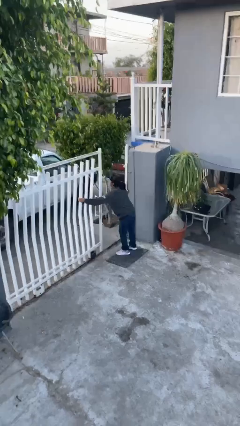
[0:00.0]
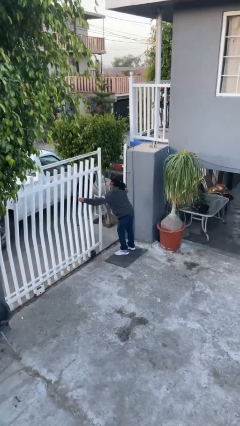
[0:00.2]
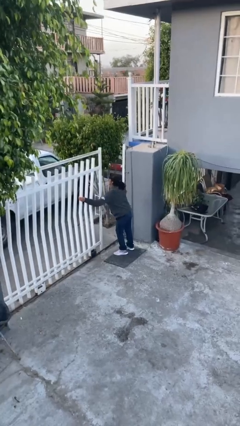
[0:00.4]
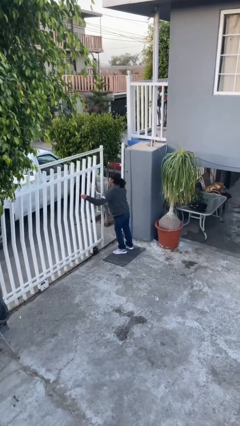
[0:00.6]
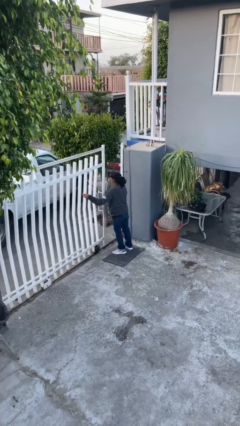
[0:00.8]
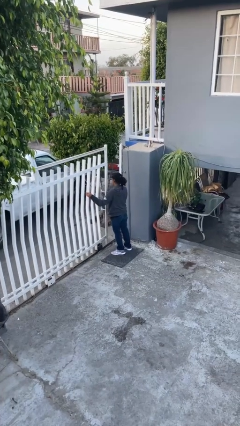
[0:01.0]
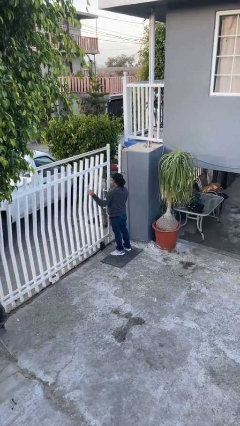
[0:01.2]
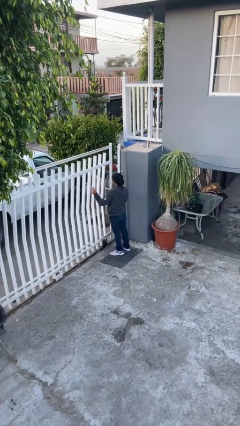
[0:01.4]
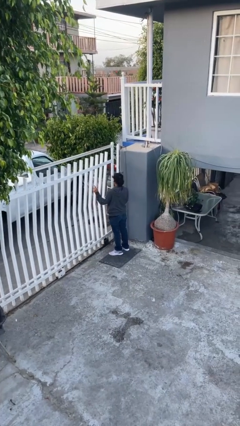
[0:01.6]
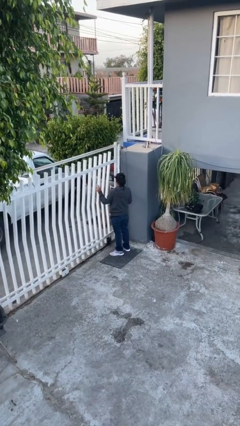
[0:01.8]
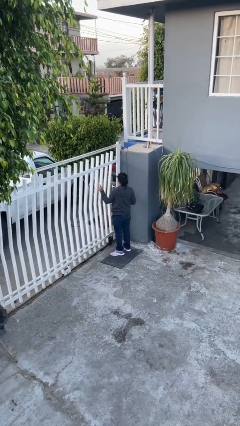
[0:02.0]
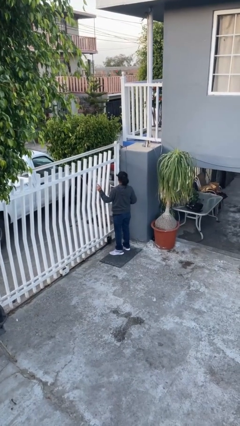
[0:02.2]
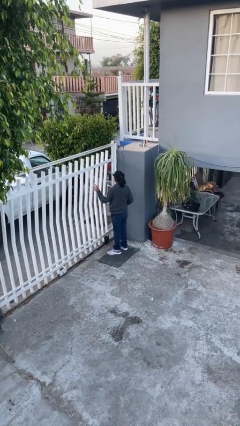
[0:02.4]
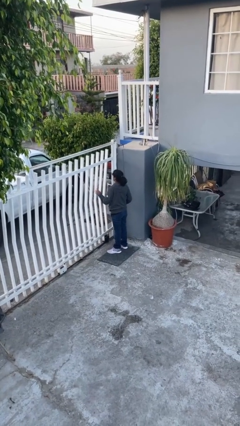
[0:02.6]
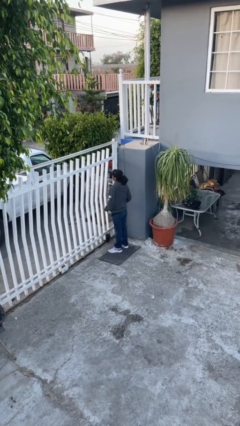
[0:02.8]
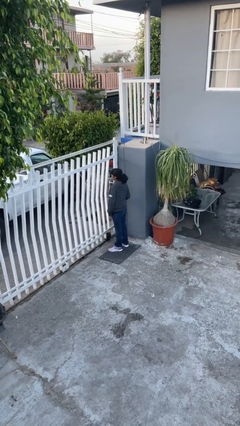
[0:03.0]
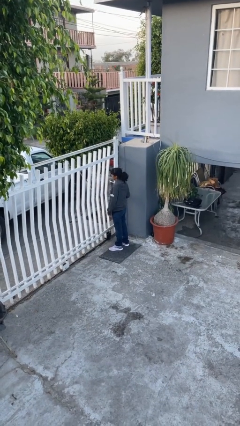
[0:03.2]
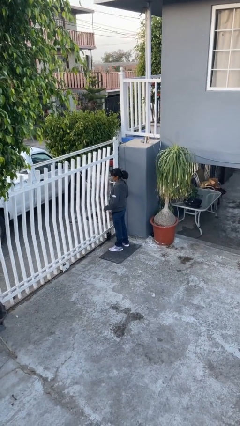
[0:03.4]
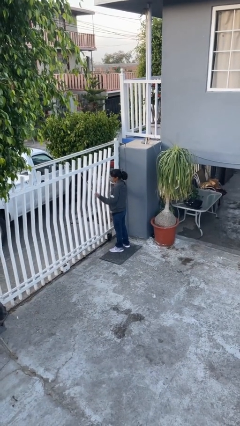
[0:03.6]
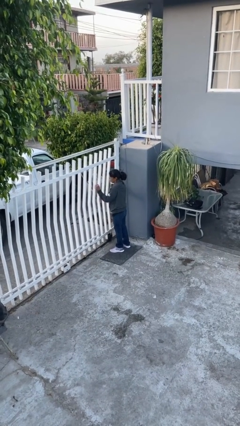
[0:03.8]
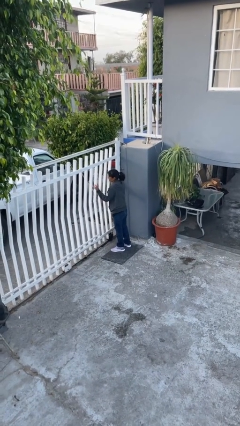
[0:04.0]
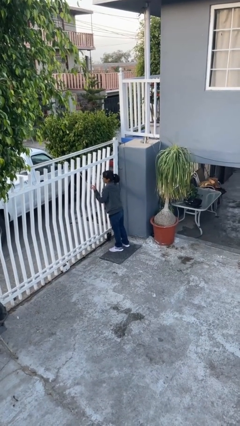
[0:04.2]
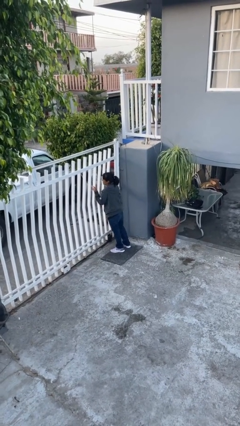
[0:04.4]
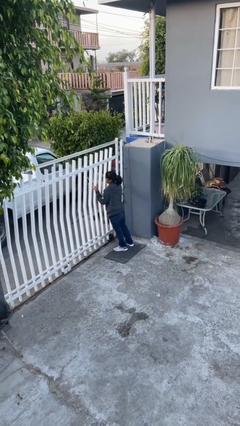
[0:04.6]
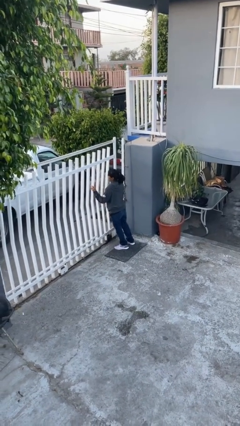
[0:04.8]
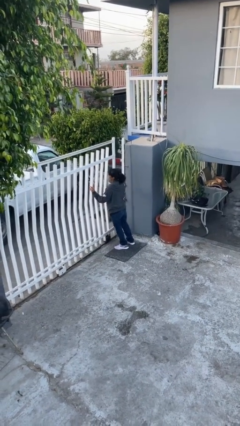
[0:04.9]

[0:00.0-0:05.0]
person opens facility door

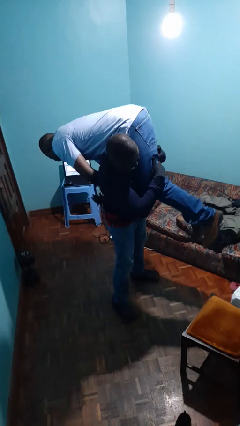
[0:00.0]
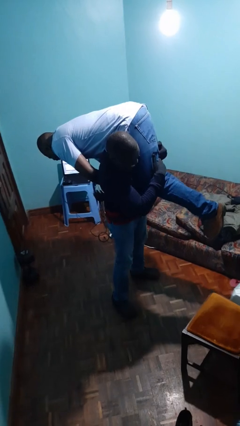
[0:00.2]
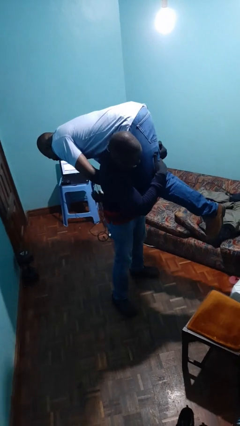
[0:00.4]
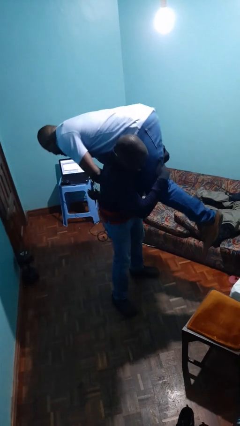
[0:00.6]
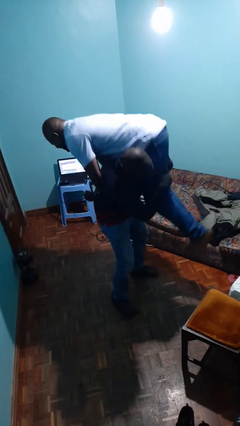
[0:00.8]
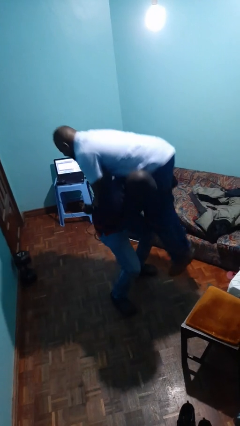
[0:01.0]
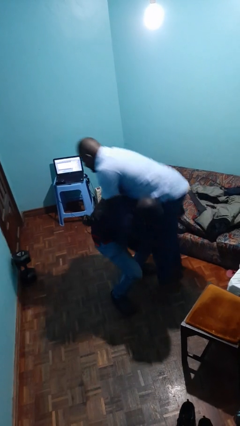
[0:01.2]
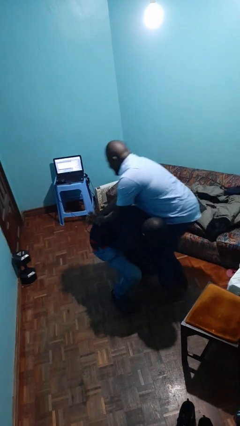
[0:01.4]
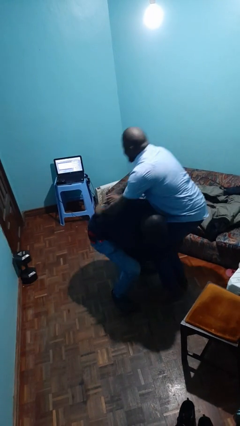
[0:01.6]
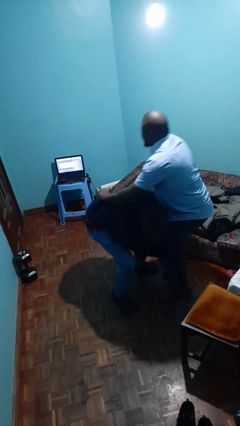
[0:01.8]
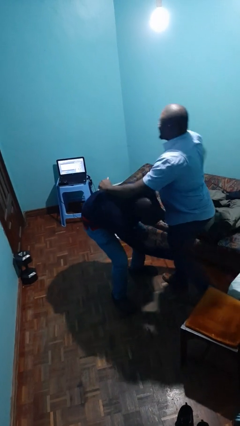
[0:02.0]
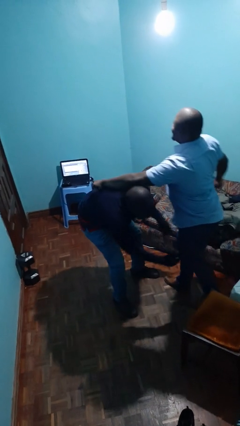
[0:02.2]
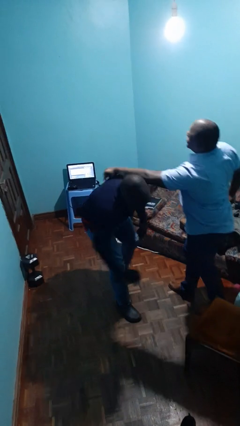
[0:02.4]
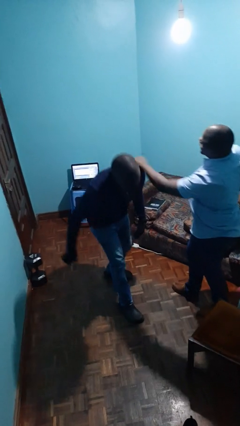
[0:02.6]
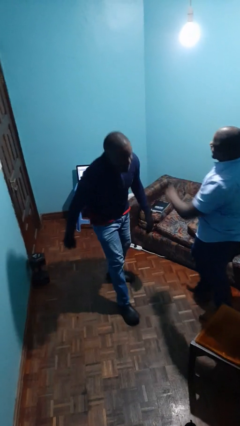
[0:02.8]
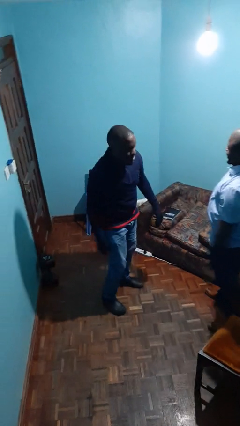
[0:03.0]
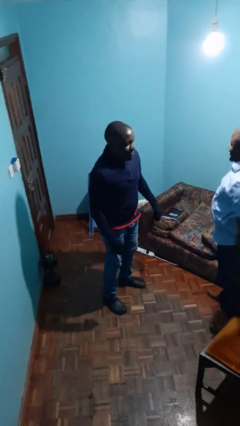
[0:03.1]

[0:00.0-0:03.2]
person puts down person

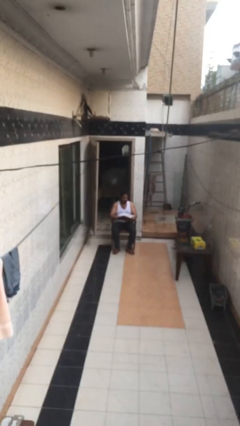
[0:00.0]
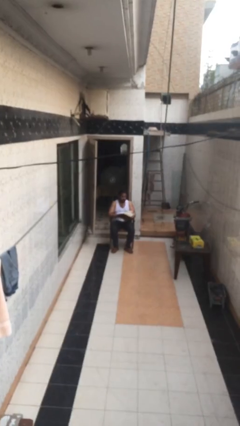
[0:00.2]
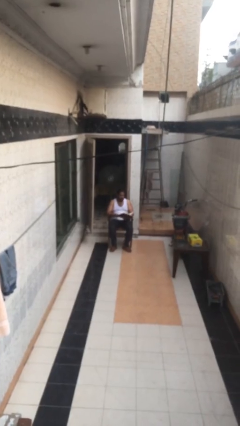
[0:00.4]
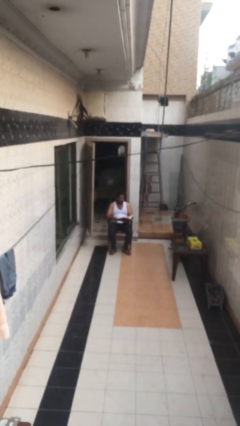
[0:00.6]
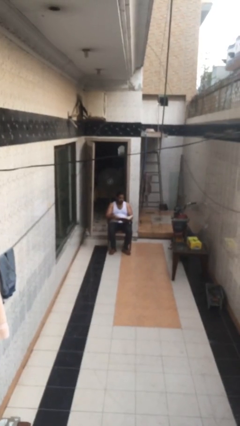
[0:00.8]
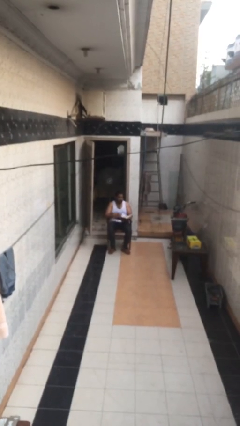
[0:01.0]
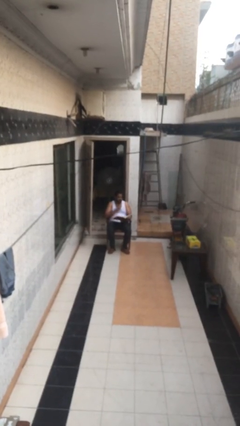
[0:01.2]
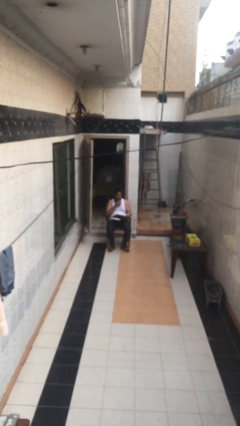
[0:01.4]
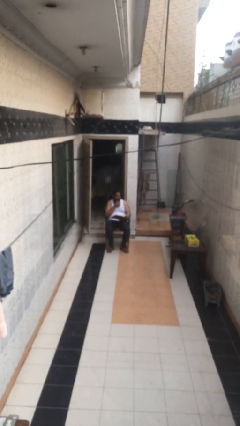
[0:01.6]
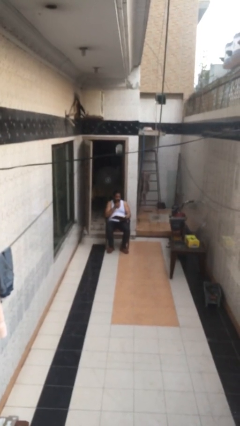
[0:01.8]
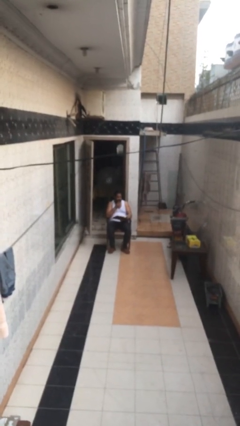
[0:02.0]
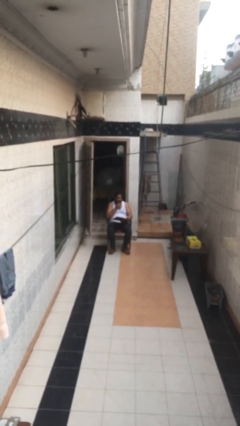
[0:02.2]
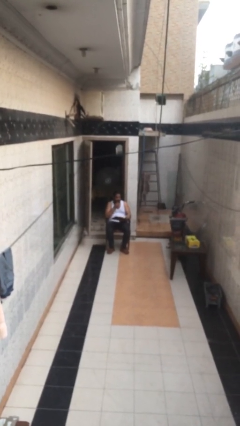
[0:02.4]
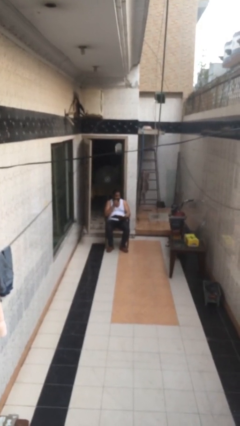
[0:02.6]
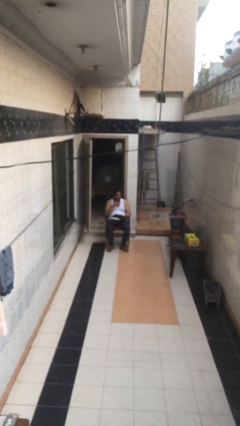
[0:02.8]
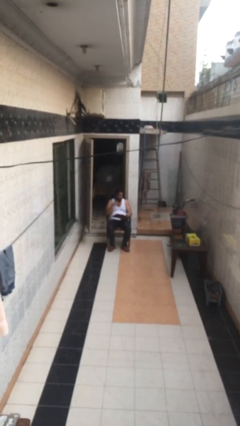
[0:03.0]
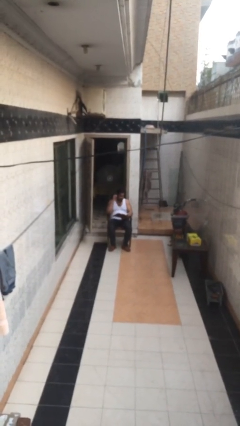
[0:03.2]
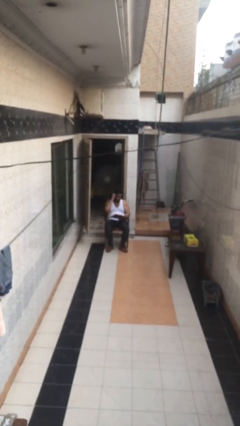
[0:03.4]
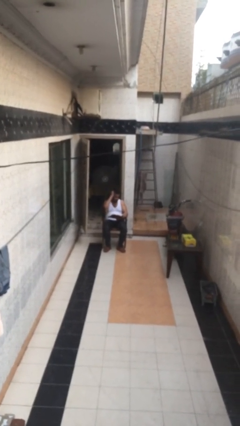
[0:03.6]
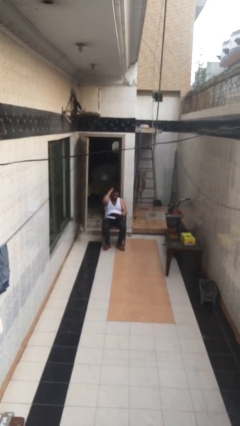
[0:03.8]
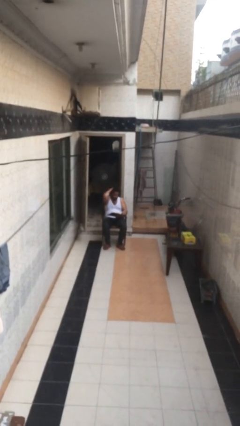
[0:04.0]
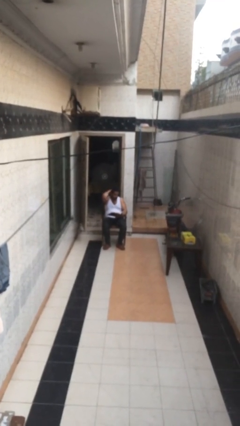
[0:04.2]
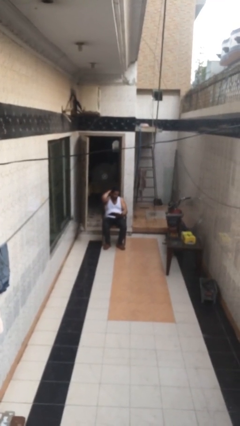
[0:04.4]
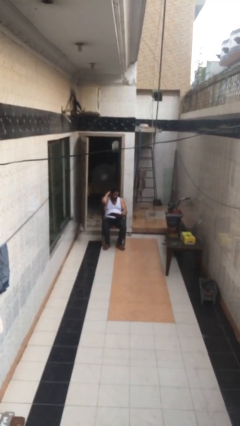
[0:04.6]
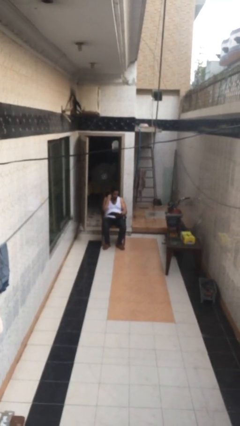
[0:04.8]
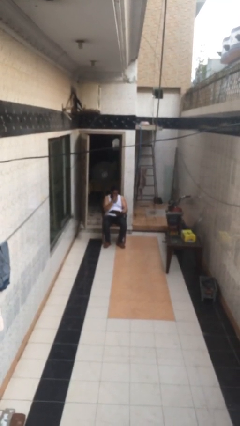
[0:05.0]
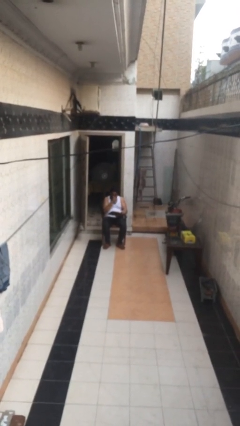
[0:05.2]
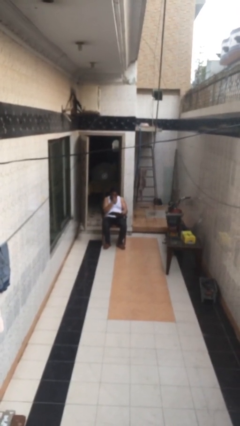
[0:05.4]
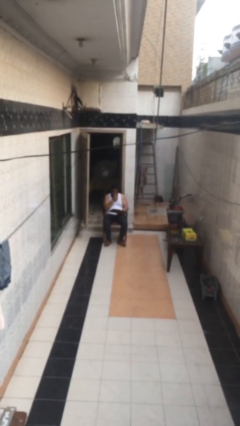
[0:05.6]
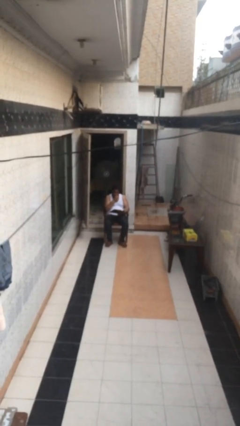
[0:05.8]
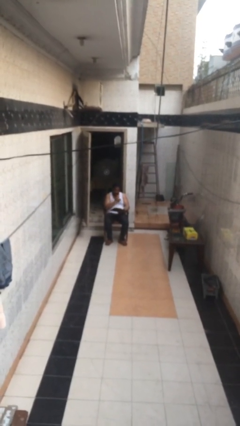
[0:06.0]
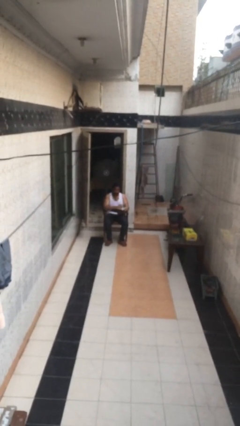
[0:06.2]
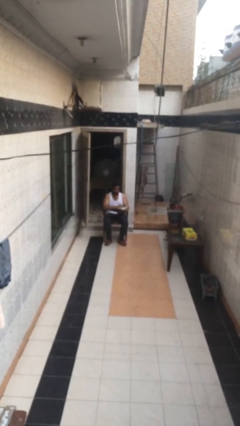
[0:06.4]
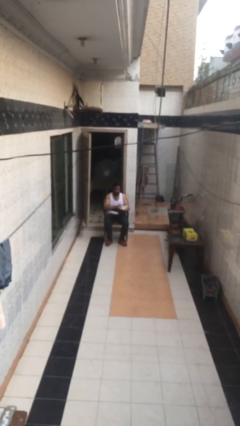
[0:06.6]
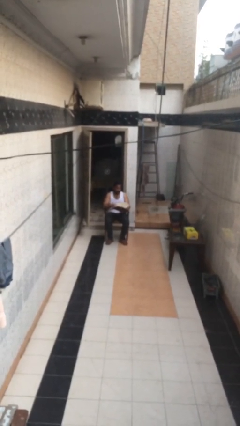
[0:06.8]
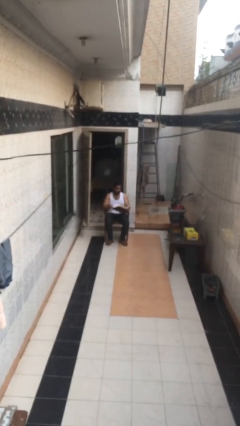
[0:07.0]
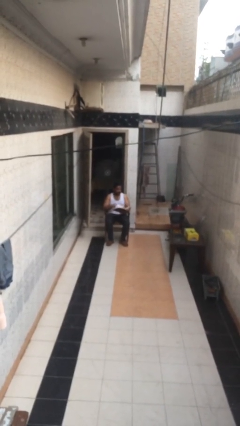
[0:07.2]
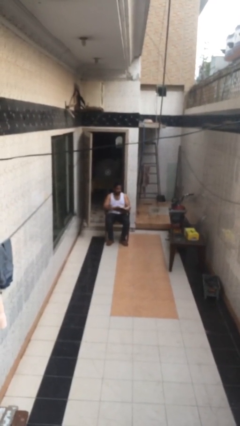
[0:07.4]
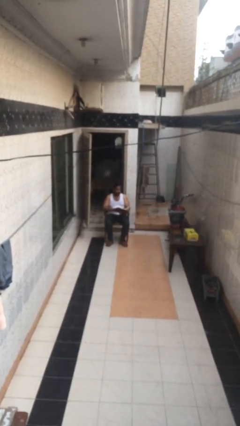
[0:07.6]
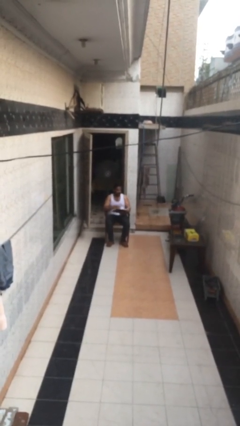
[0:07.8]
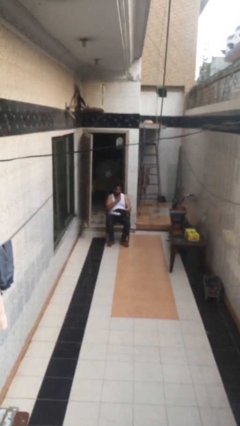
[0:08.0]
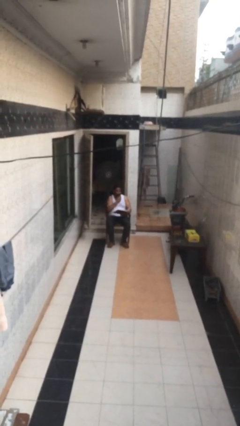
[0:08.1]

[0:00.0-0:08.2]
person reads document

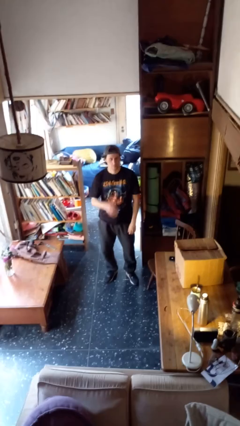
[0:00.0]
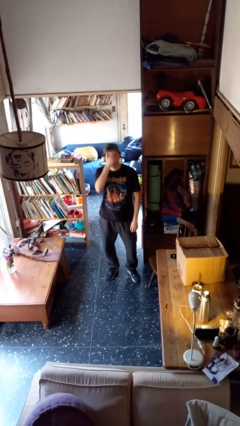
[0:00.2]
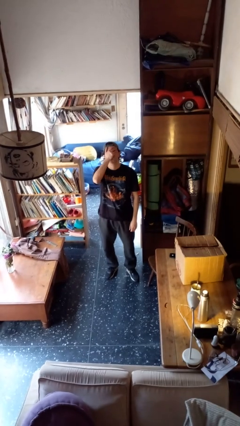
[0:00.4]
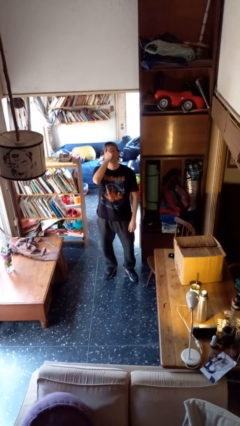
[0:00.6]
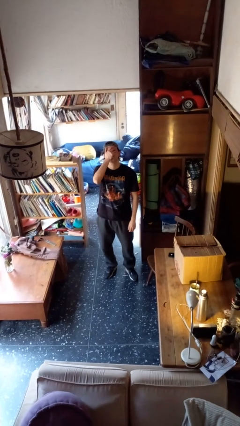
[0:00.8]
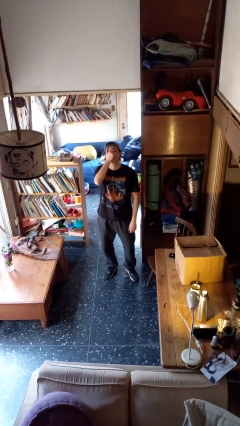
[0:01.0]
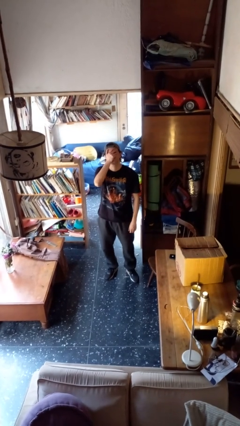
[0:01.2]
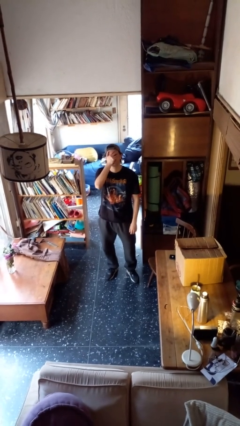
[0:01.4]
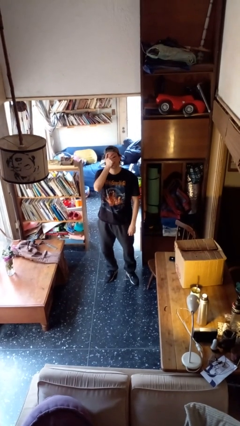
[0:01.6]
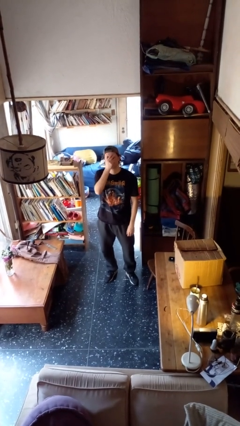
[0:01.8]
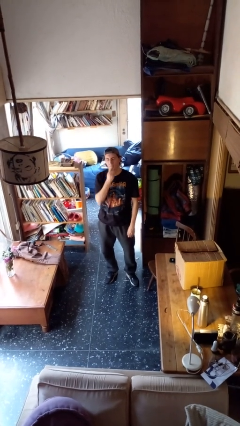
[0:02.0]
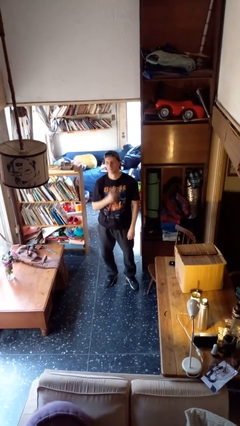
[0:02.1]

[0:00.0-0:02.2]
person covers face with hands
